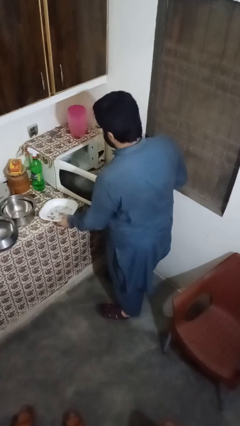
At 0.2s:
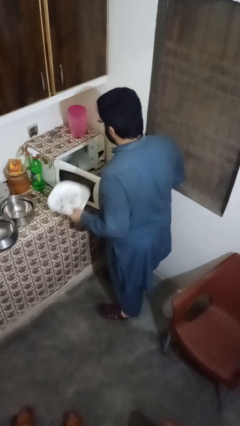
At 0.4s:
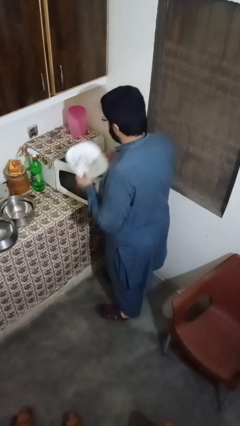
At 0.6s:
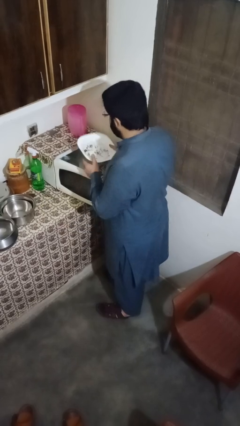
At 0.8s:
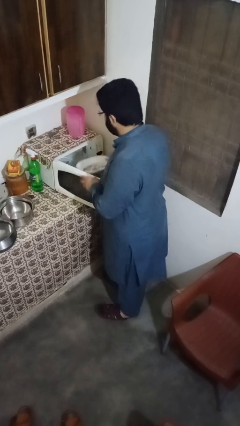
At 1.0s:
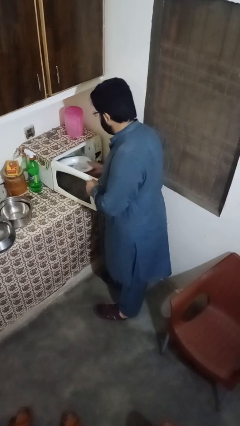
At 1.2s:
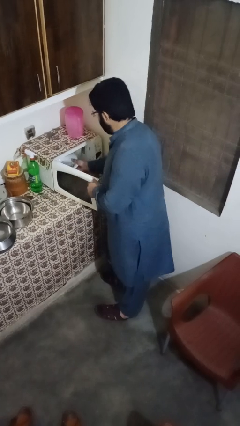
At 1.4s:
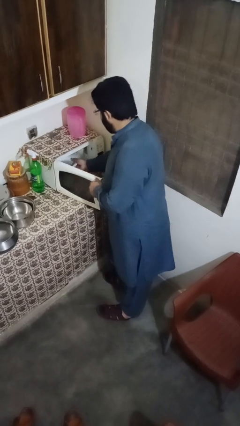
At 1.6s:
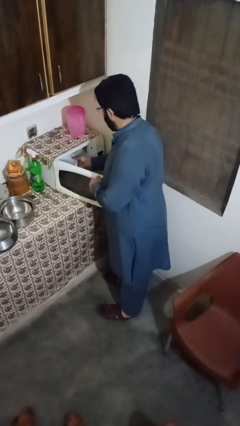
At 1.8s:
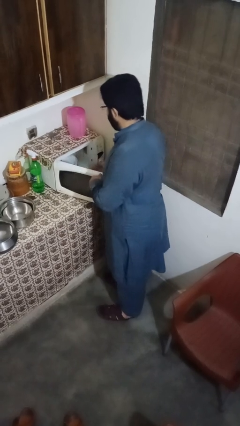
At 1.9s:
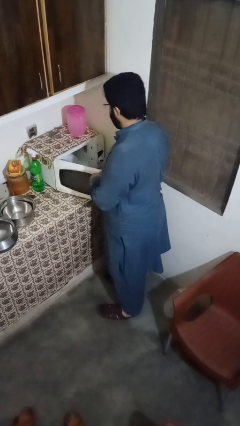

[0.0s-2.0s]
person puts object into microwave

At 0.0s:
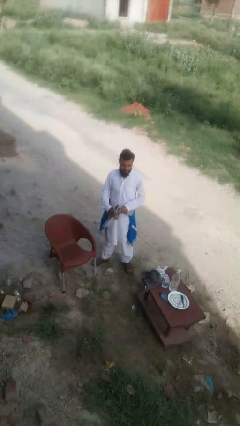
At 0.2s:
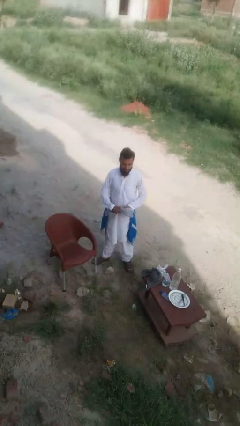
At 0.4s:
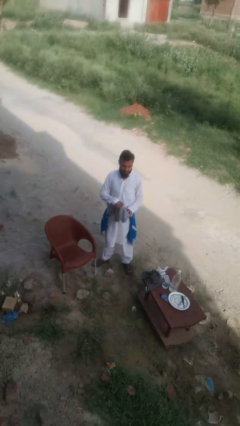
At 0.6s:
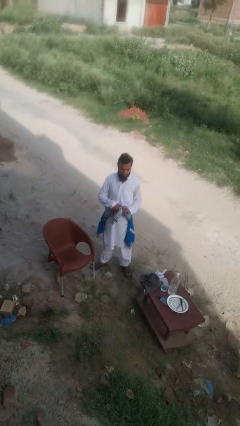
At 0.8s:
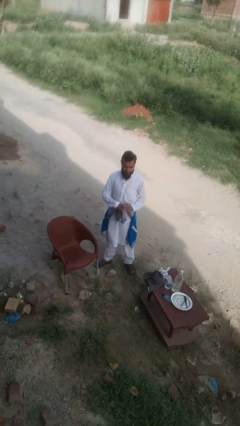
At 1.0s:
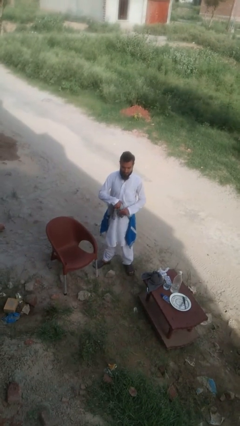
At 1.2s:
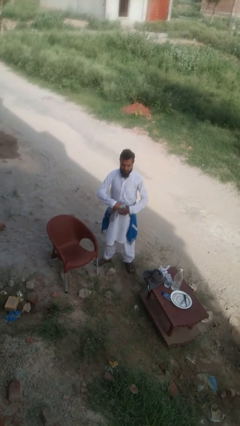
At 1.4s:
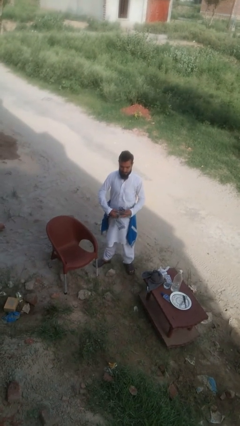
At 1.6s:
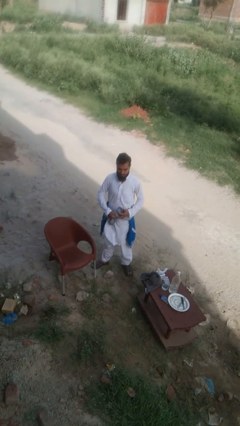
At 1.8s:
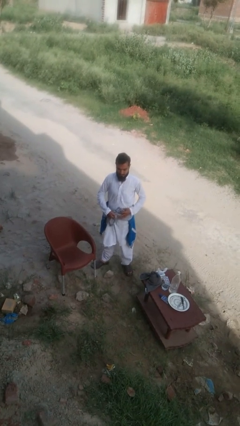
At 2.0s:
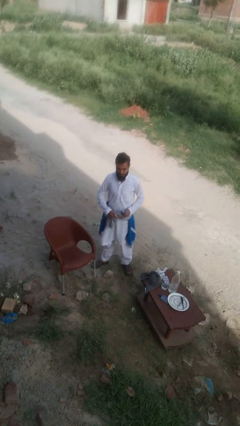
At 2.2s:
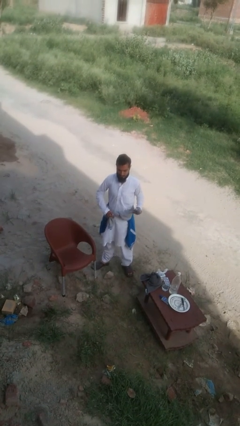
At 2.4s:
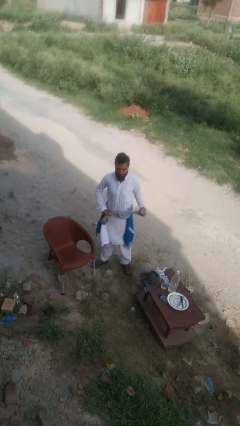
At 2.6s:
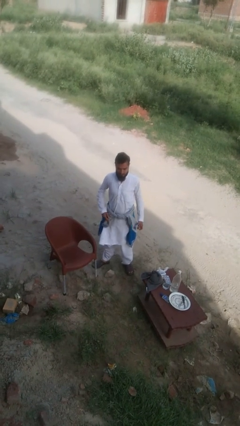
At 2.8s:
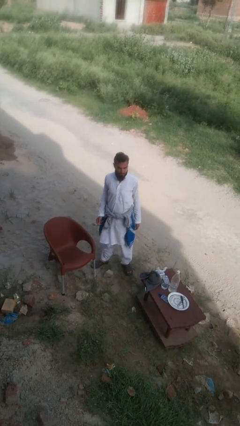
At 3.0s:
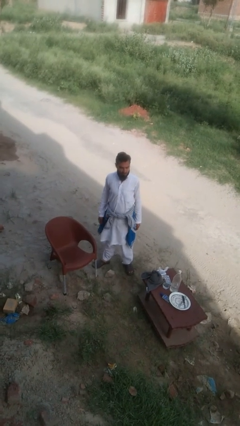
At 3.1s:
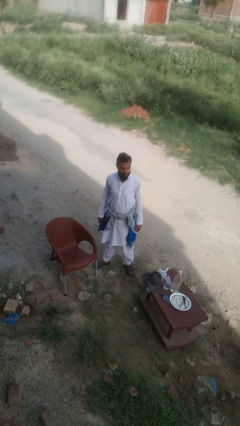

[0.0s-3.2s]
person ties jacket around waist

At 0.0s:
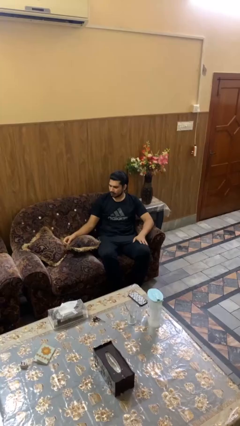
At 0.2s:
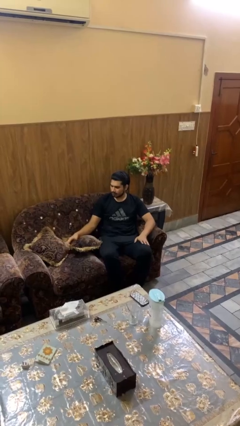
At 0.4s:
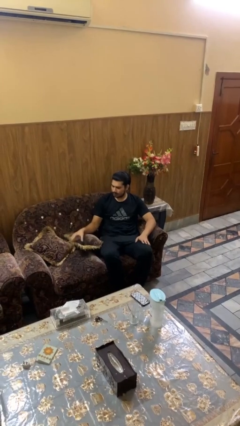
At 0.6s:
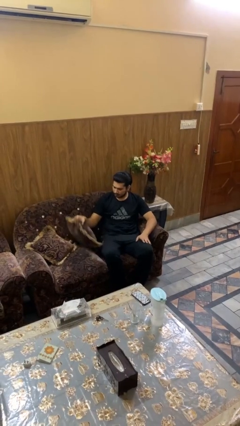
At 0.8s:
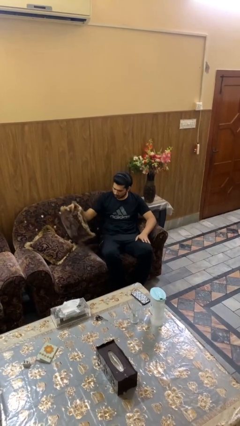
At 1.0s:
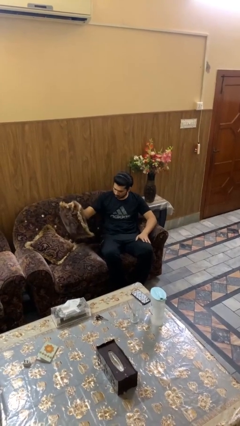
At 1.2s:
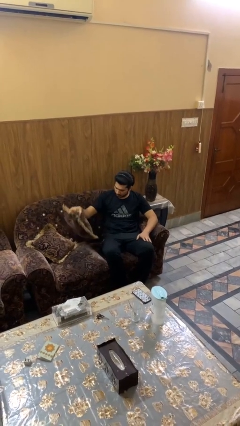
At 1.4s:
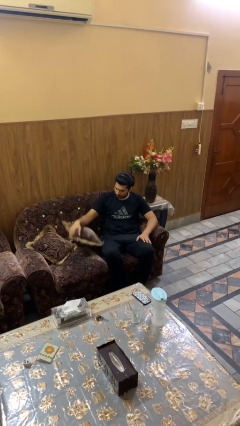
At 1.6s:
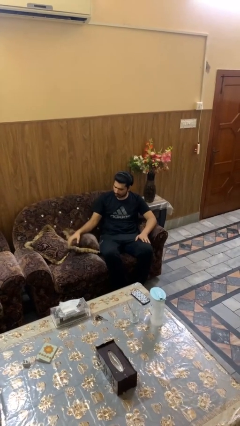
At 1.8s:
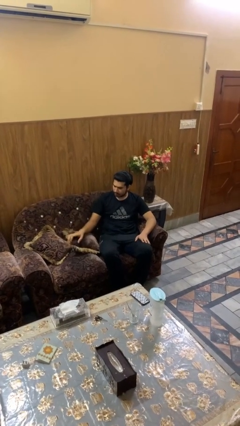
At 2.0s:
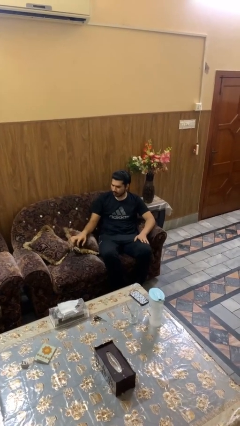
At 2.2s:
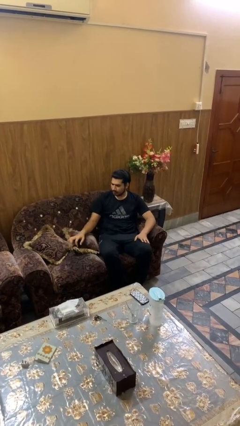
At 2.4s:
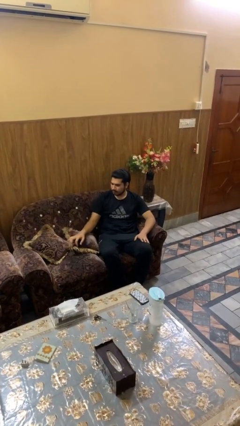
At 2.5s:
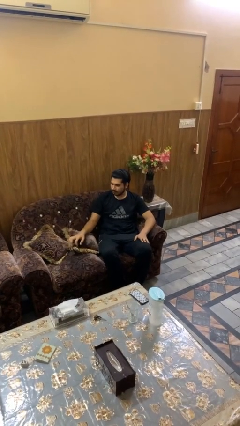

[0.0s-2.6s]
person searches in couch

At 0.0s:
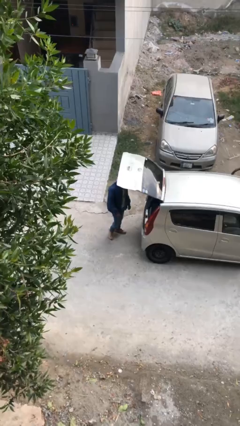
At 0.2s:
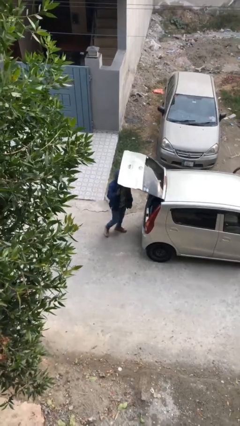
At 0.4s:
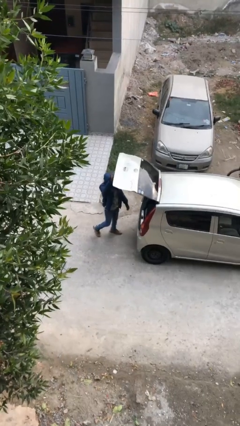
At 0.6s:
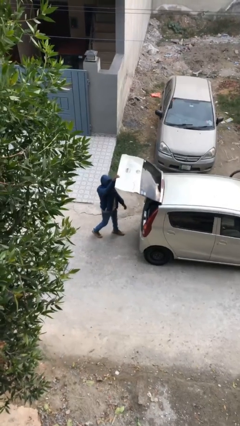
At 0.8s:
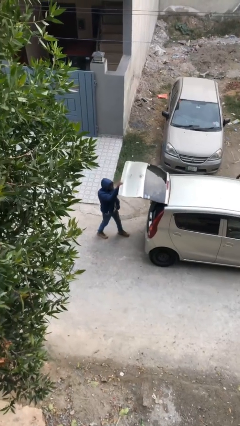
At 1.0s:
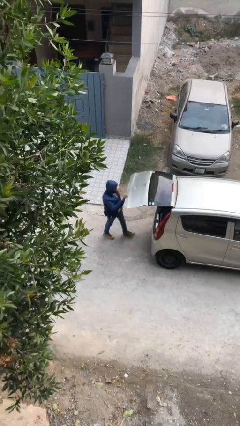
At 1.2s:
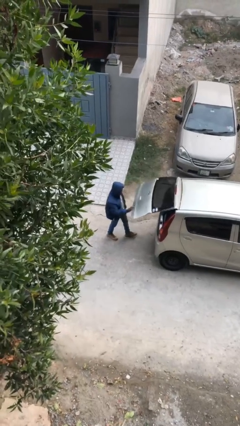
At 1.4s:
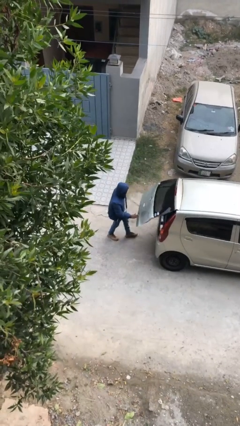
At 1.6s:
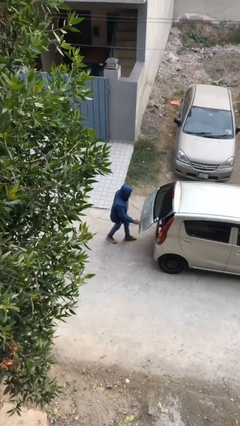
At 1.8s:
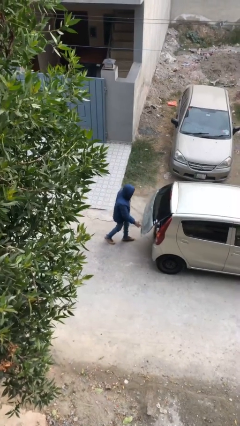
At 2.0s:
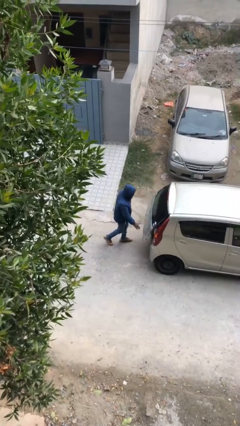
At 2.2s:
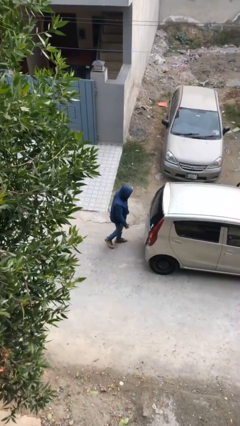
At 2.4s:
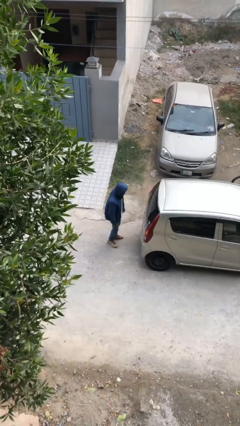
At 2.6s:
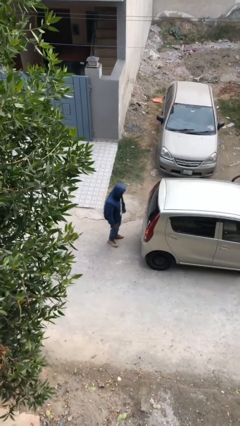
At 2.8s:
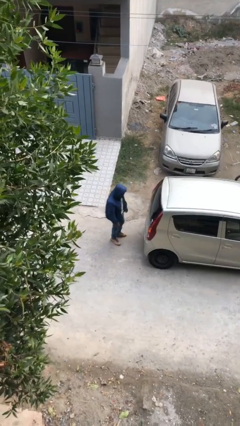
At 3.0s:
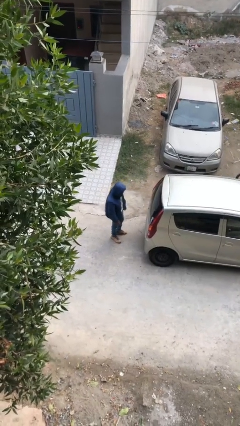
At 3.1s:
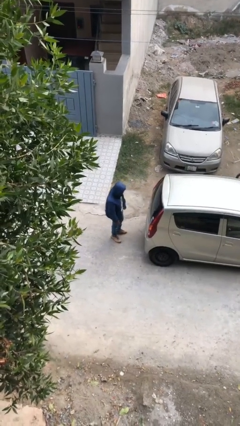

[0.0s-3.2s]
person closes car trunk

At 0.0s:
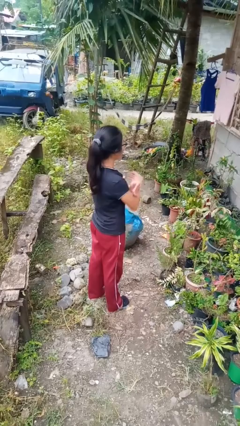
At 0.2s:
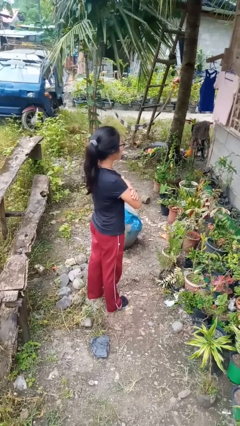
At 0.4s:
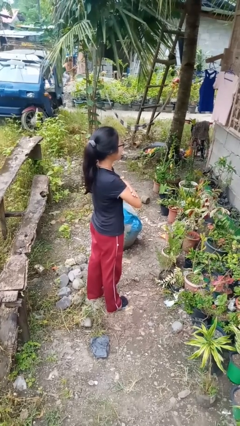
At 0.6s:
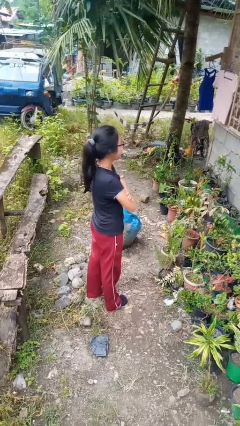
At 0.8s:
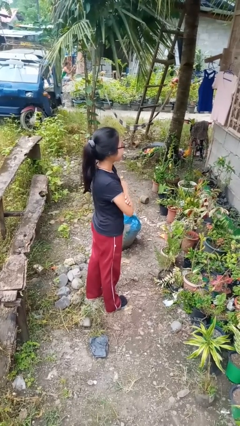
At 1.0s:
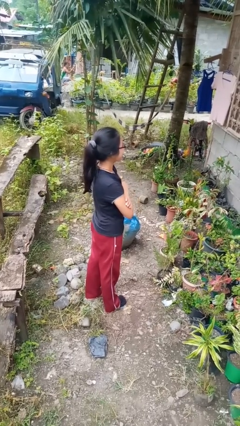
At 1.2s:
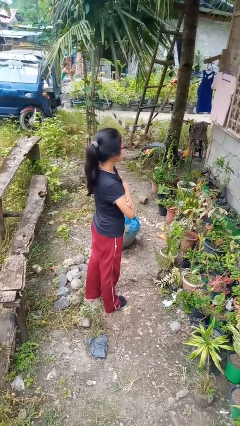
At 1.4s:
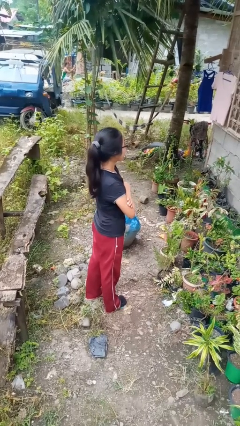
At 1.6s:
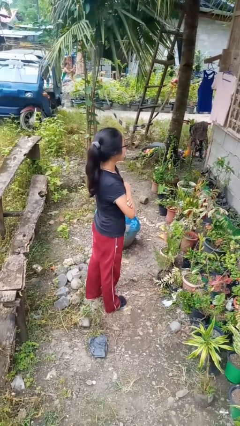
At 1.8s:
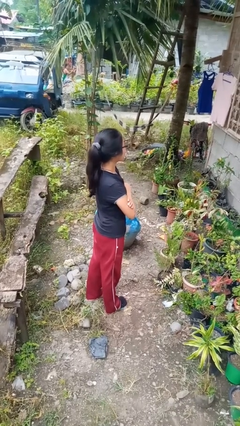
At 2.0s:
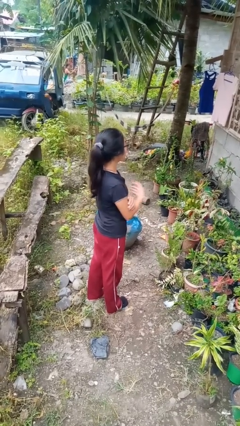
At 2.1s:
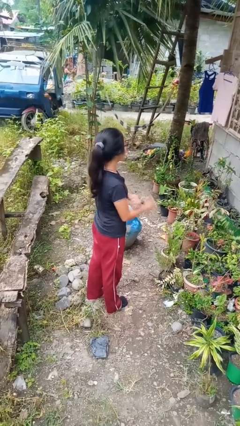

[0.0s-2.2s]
person crosses arms

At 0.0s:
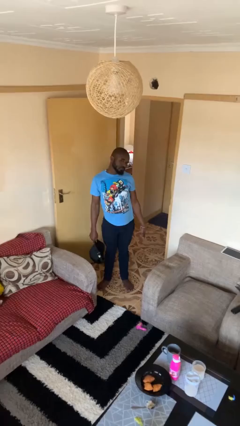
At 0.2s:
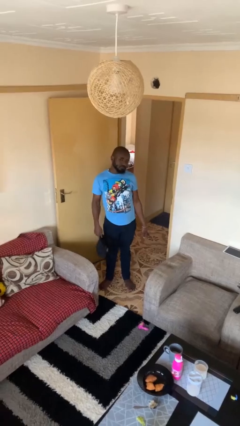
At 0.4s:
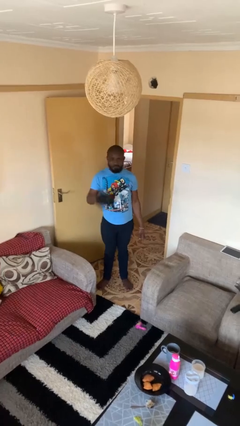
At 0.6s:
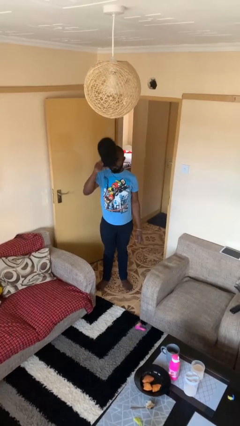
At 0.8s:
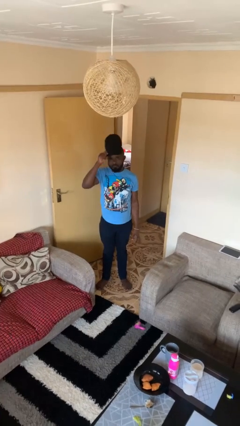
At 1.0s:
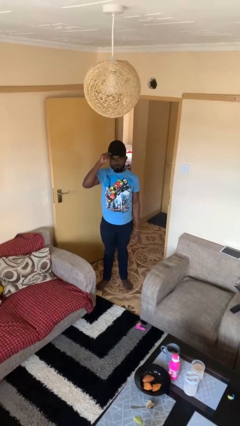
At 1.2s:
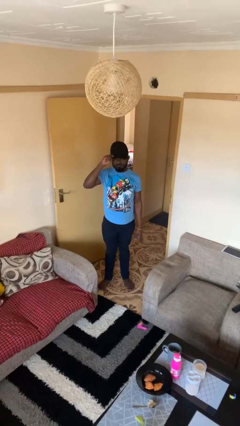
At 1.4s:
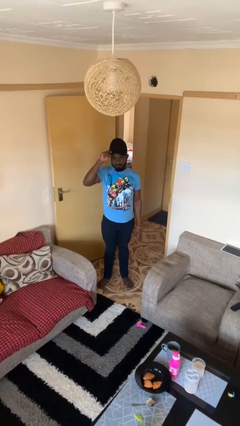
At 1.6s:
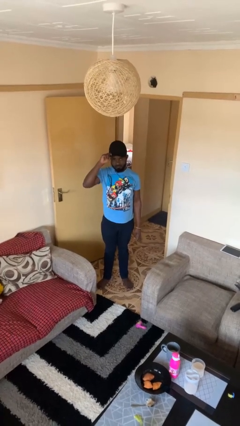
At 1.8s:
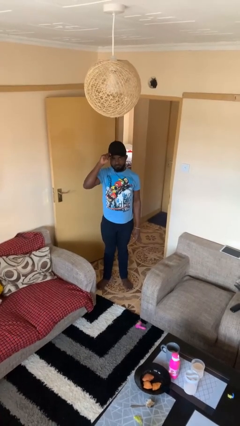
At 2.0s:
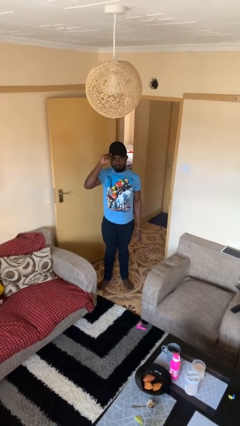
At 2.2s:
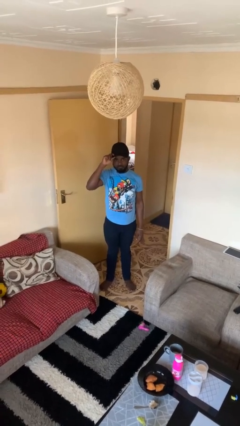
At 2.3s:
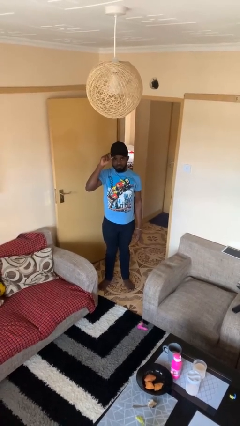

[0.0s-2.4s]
person puts on hat

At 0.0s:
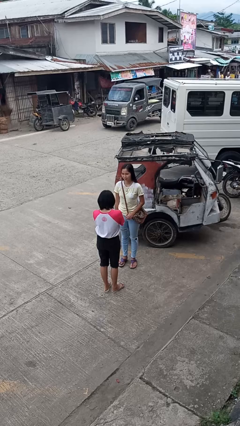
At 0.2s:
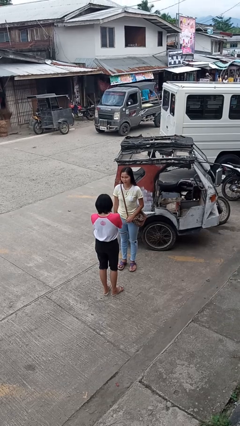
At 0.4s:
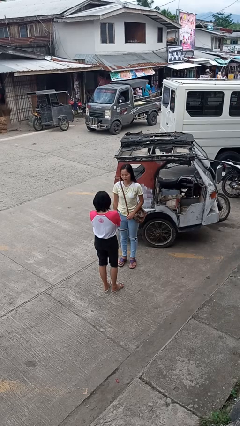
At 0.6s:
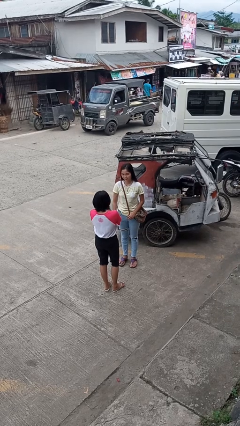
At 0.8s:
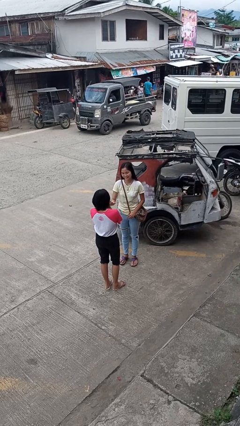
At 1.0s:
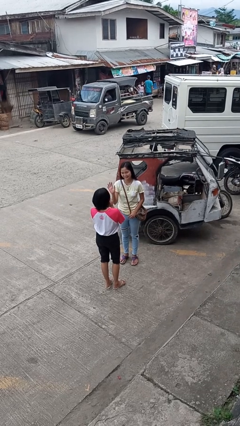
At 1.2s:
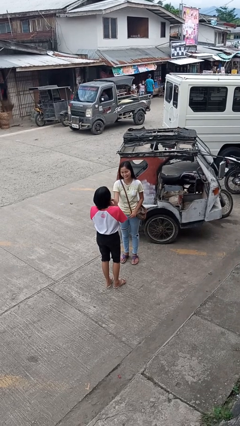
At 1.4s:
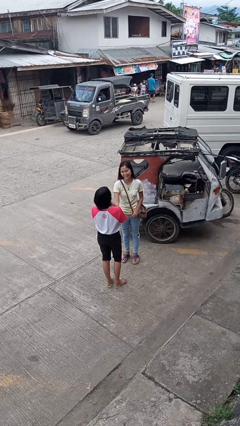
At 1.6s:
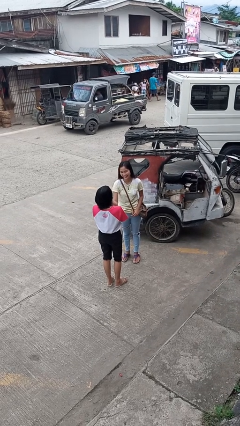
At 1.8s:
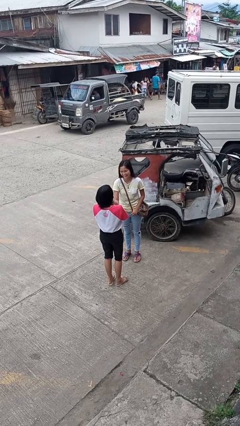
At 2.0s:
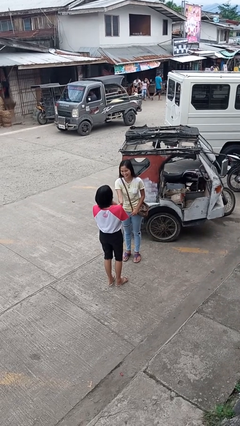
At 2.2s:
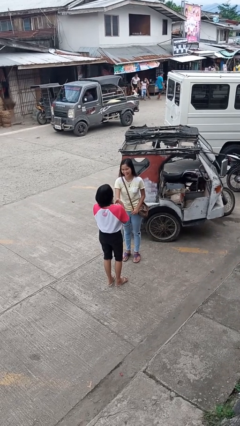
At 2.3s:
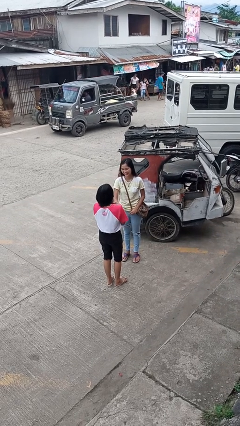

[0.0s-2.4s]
person laughs with person
